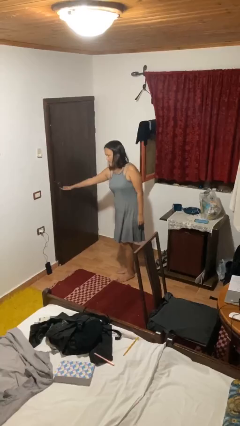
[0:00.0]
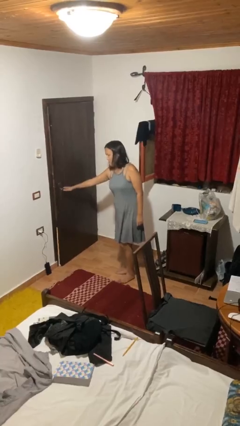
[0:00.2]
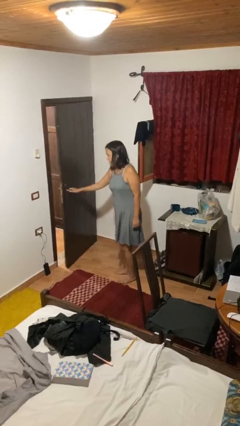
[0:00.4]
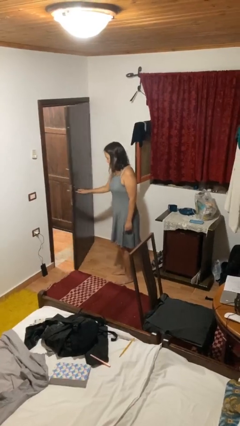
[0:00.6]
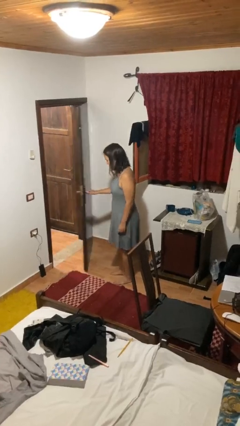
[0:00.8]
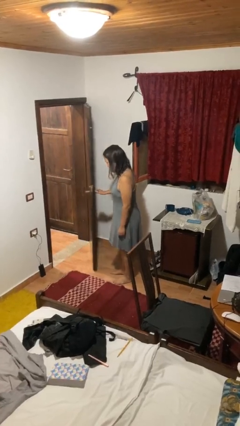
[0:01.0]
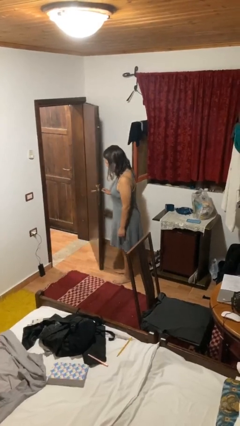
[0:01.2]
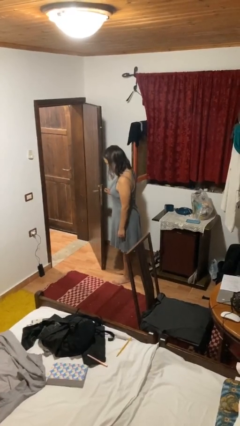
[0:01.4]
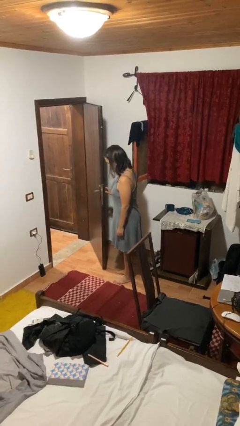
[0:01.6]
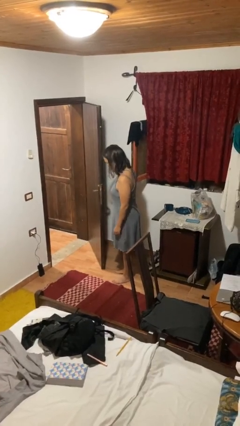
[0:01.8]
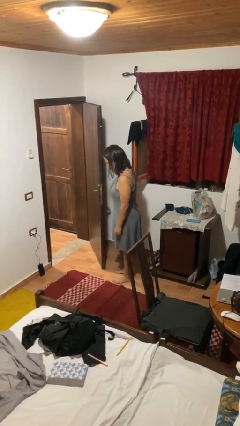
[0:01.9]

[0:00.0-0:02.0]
person opens facility door

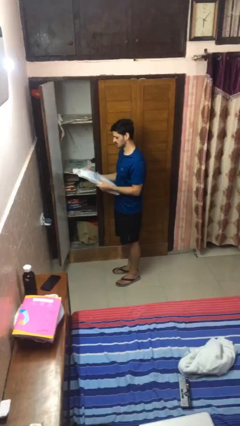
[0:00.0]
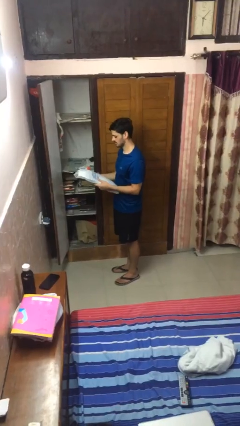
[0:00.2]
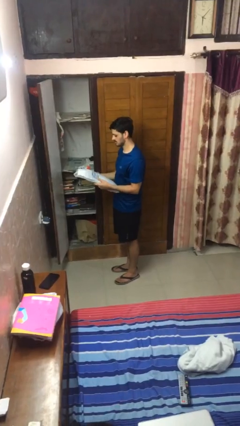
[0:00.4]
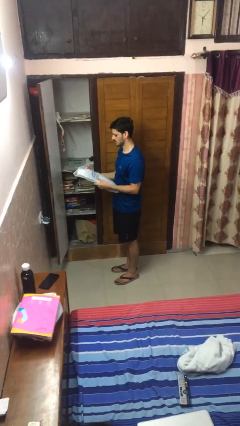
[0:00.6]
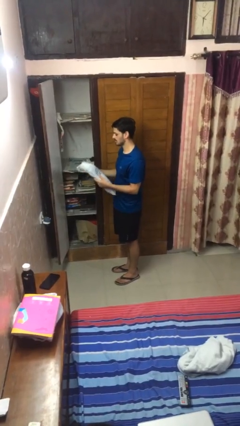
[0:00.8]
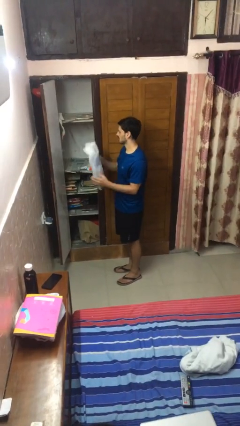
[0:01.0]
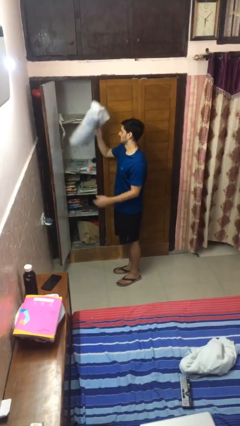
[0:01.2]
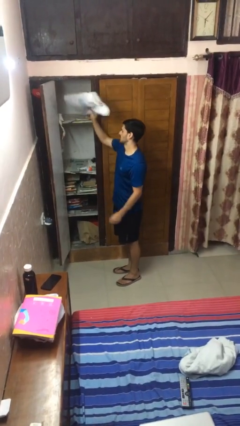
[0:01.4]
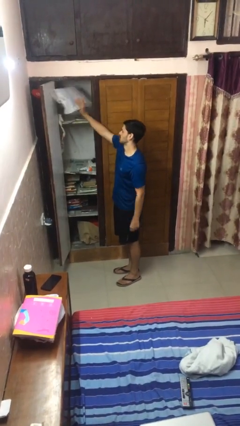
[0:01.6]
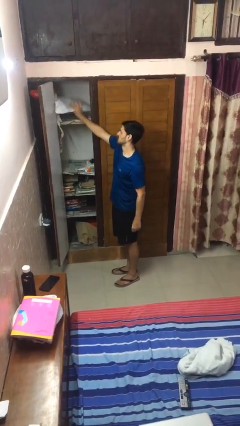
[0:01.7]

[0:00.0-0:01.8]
person puts down object on shelf

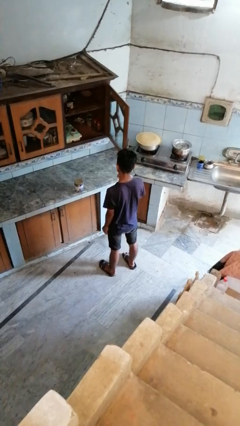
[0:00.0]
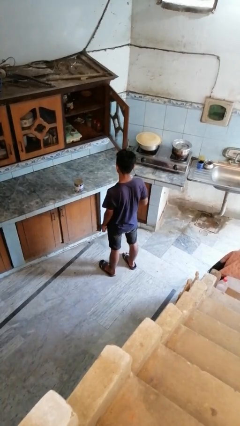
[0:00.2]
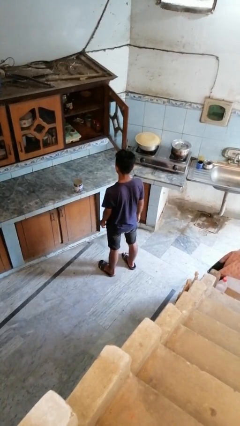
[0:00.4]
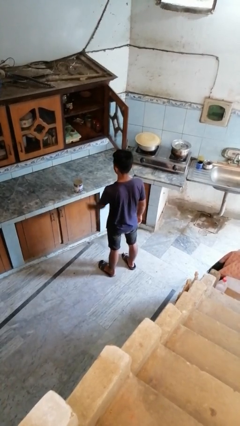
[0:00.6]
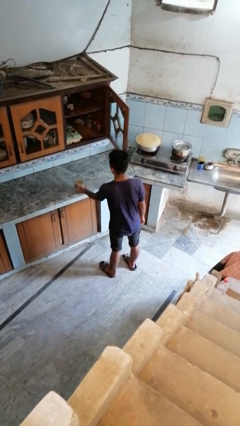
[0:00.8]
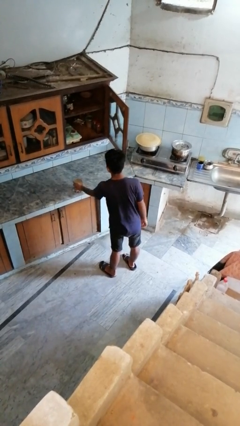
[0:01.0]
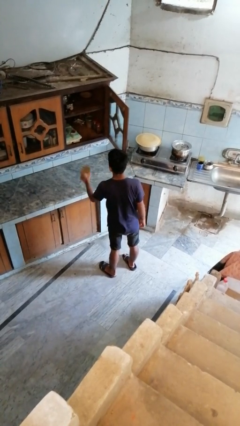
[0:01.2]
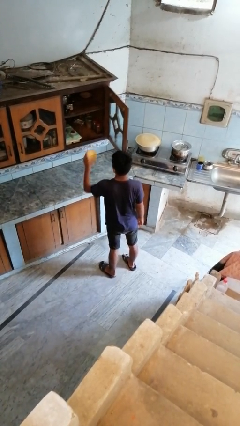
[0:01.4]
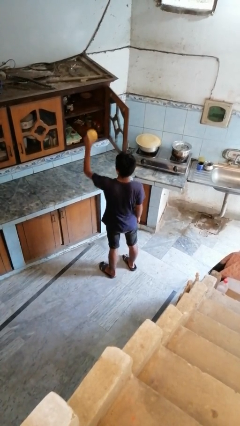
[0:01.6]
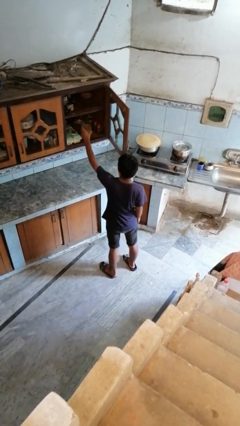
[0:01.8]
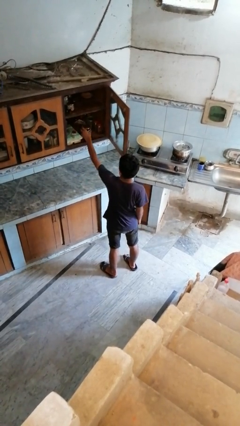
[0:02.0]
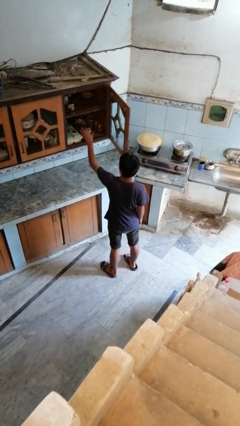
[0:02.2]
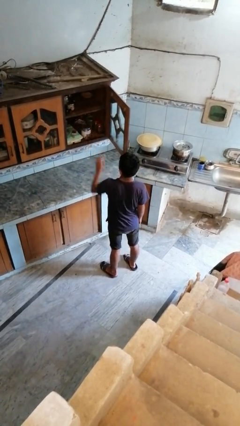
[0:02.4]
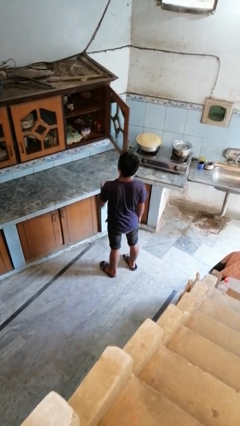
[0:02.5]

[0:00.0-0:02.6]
person puts object in cabinet

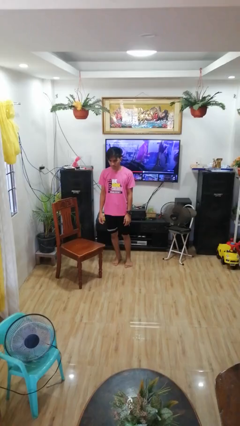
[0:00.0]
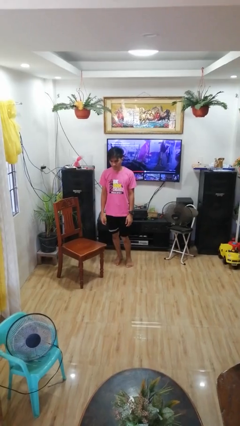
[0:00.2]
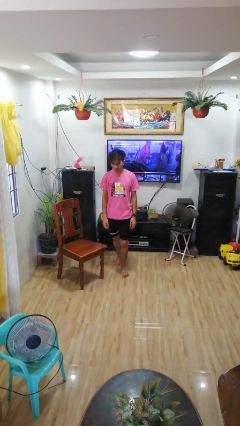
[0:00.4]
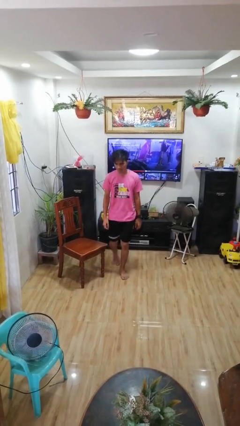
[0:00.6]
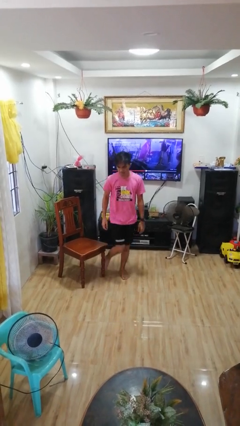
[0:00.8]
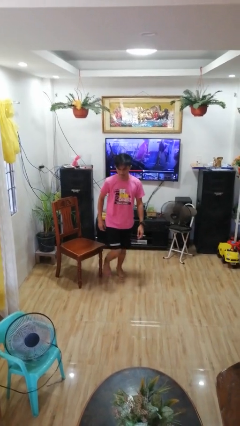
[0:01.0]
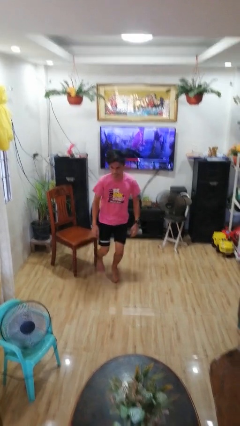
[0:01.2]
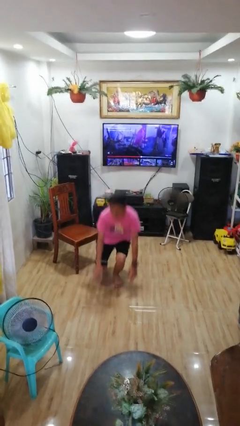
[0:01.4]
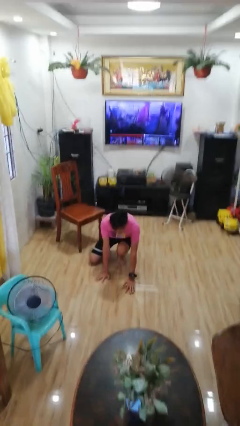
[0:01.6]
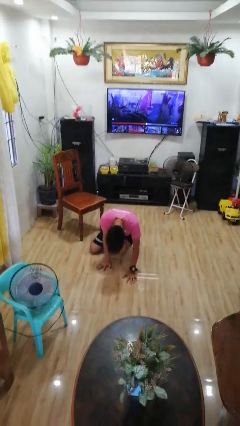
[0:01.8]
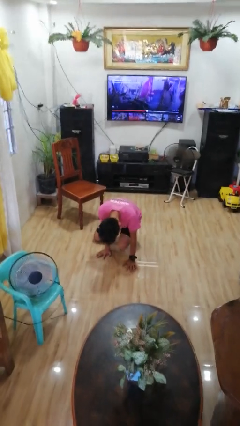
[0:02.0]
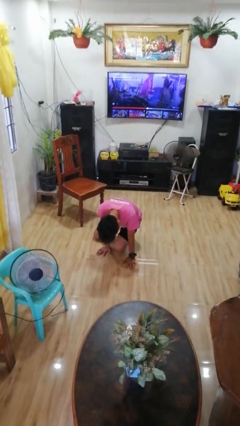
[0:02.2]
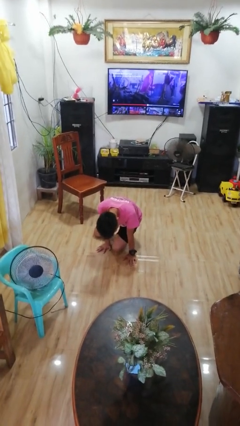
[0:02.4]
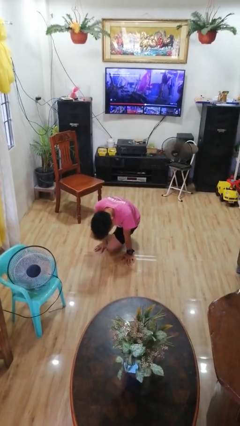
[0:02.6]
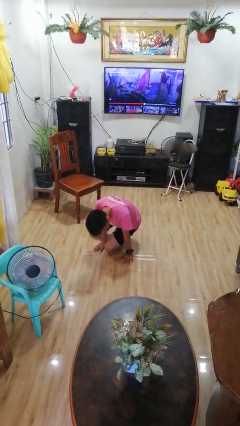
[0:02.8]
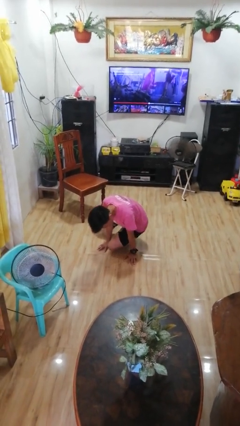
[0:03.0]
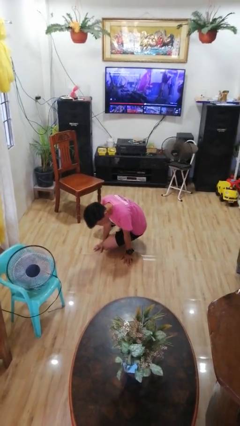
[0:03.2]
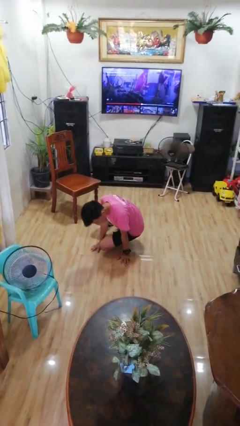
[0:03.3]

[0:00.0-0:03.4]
person trips on object on floor

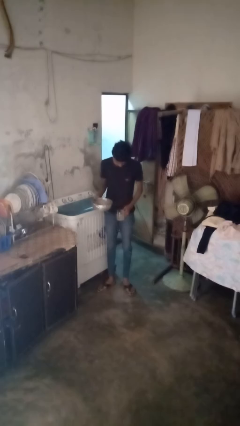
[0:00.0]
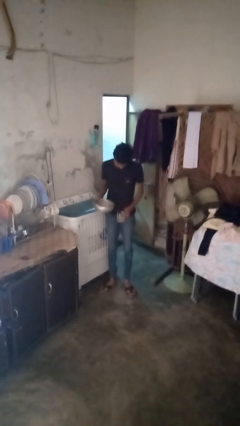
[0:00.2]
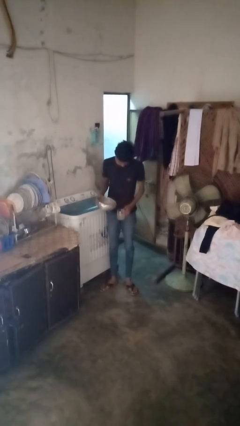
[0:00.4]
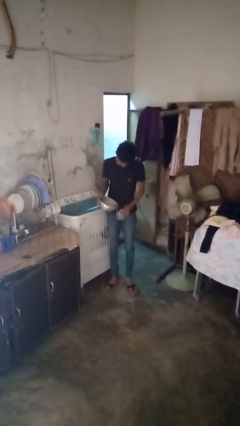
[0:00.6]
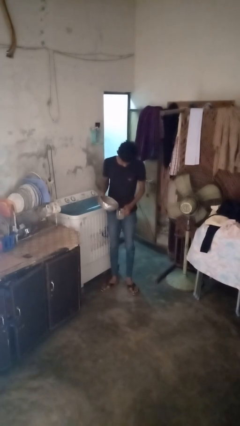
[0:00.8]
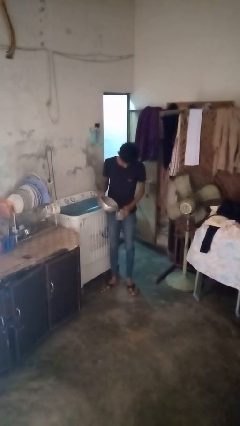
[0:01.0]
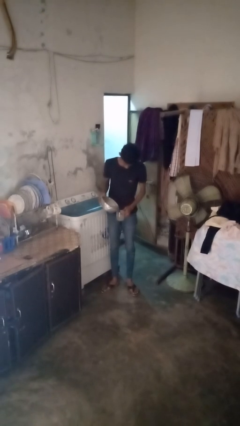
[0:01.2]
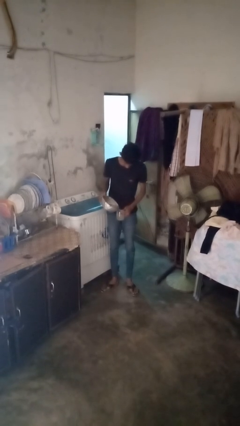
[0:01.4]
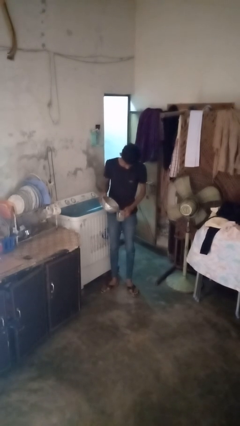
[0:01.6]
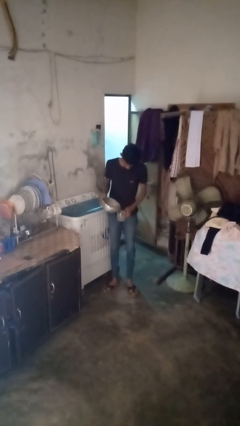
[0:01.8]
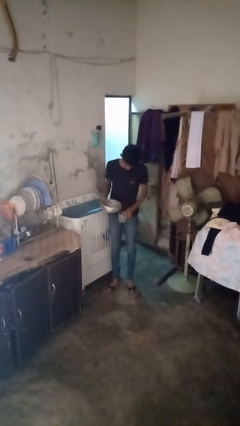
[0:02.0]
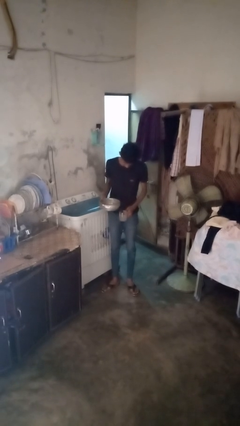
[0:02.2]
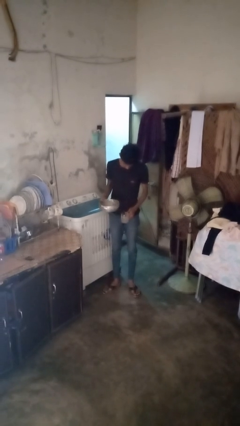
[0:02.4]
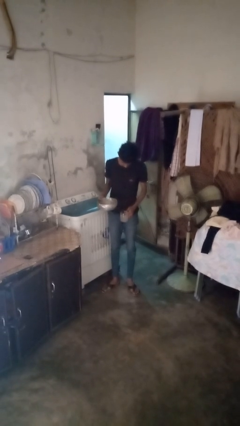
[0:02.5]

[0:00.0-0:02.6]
person pours liquid into cup

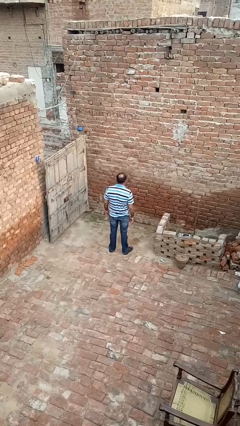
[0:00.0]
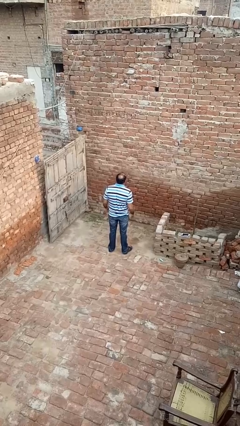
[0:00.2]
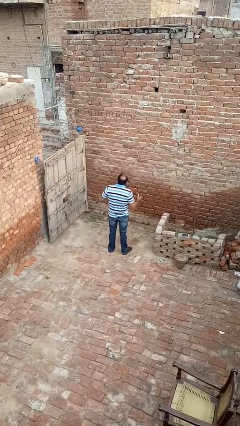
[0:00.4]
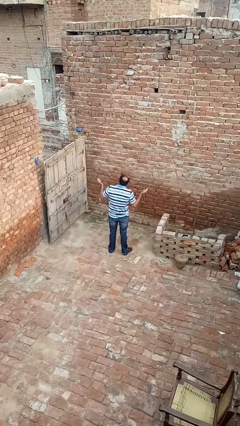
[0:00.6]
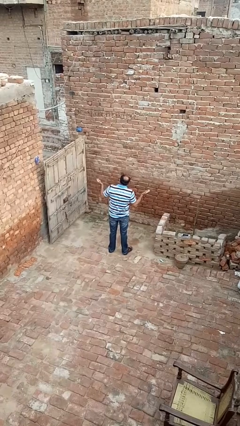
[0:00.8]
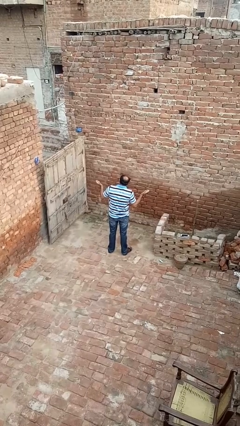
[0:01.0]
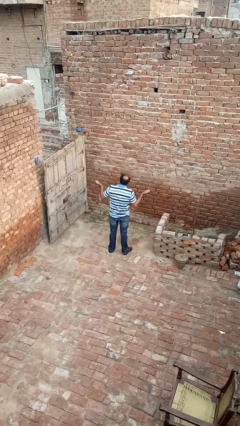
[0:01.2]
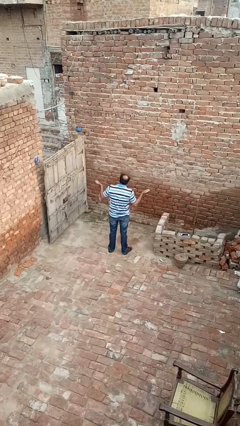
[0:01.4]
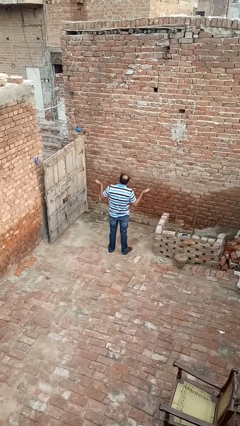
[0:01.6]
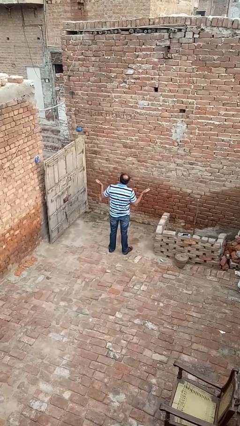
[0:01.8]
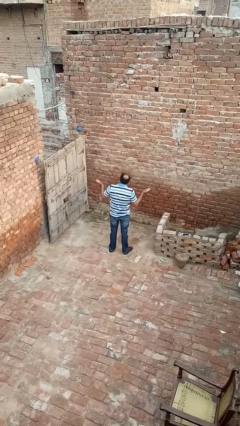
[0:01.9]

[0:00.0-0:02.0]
person shrugs

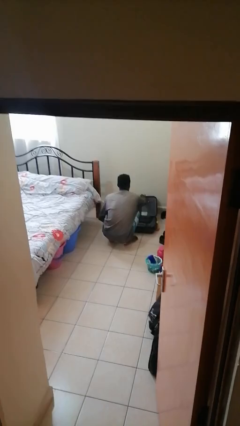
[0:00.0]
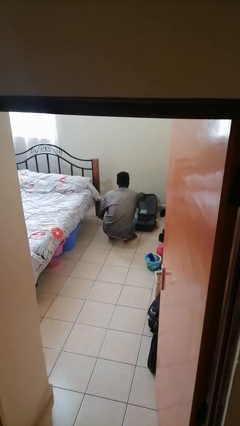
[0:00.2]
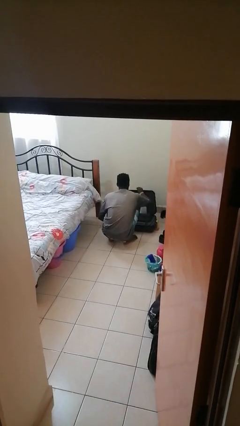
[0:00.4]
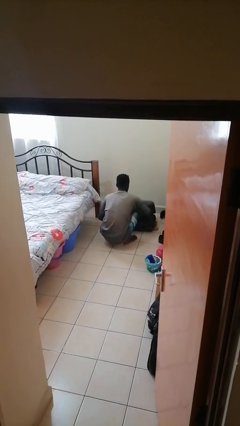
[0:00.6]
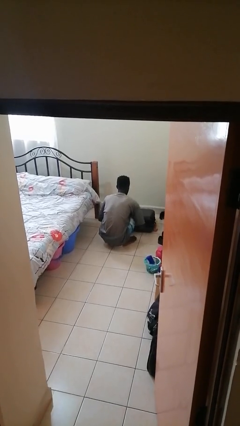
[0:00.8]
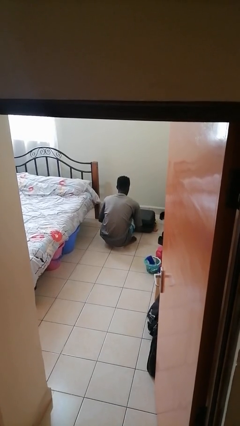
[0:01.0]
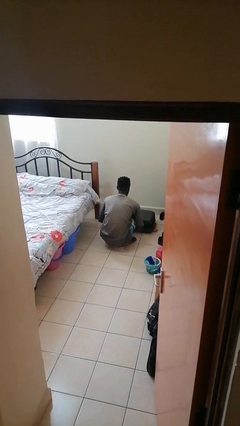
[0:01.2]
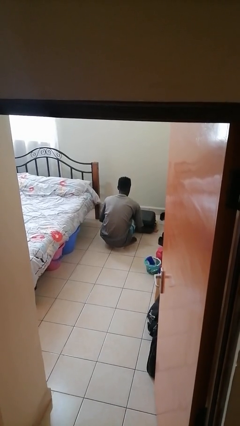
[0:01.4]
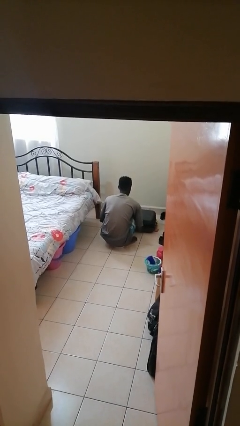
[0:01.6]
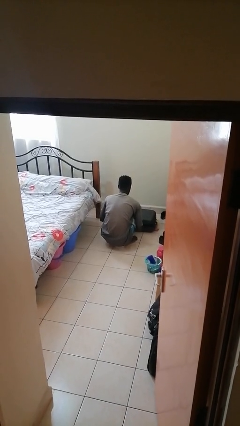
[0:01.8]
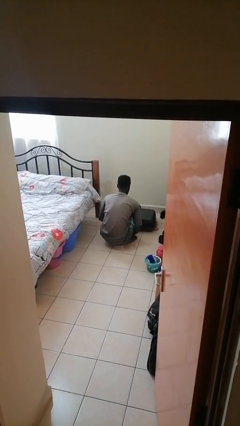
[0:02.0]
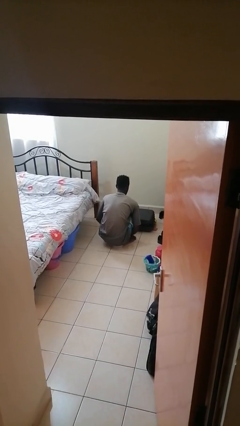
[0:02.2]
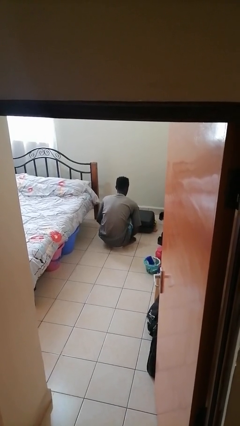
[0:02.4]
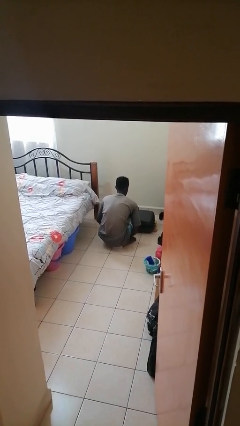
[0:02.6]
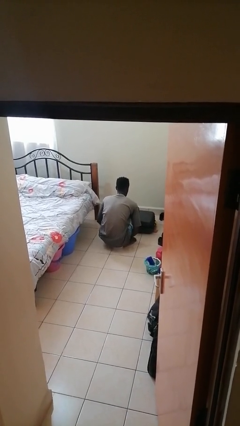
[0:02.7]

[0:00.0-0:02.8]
person closes suitcase
